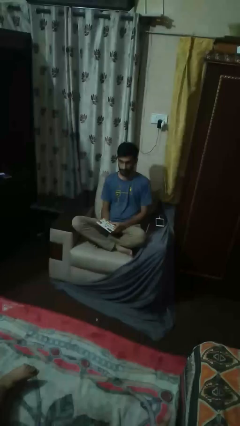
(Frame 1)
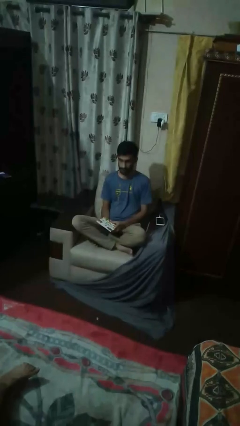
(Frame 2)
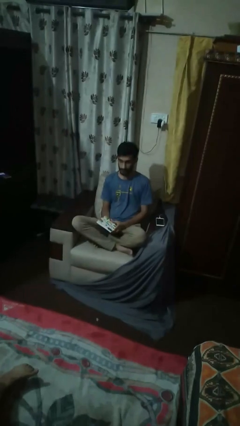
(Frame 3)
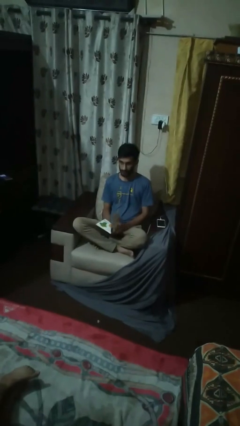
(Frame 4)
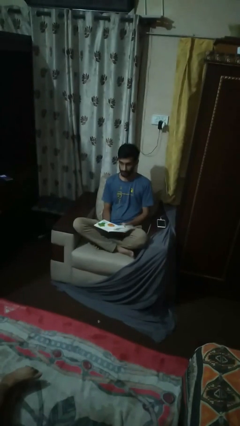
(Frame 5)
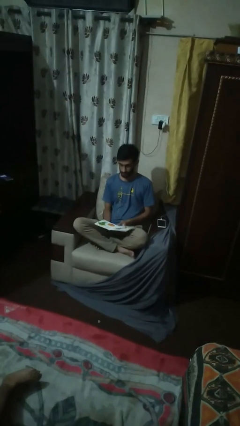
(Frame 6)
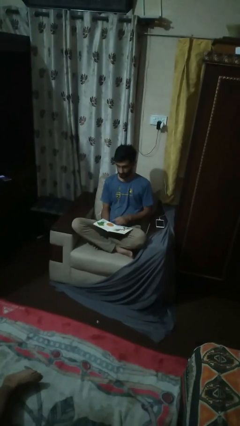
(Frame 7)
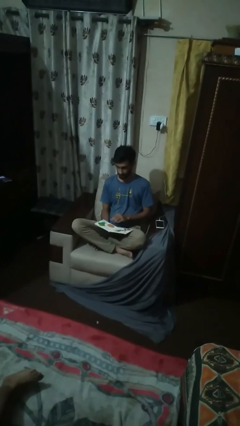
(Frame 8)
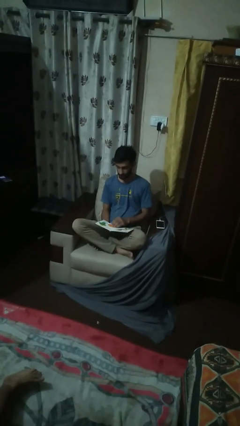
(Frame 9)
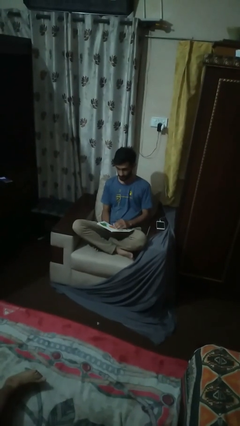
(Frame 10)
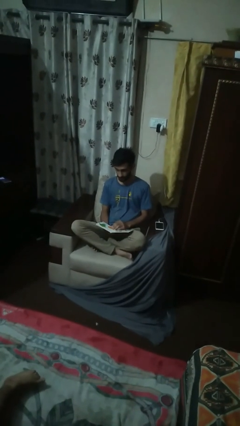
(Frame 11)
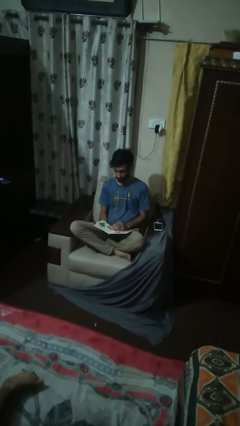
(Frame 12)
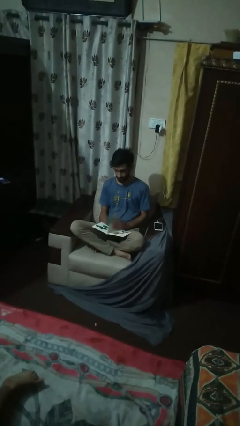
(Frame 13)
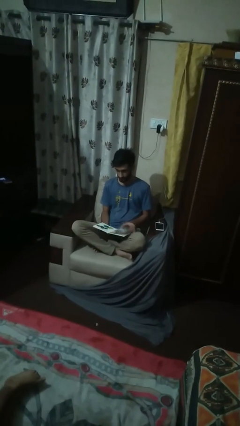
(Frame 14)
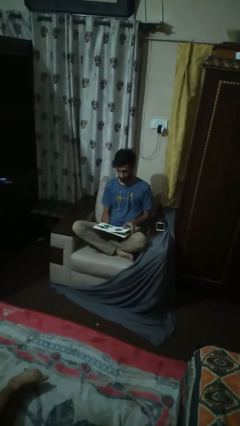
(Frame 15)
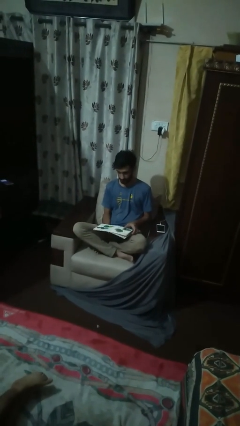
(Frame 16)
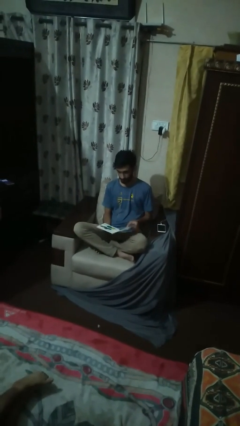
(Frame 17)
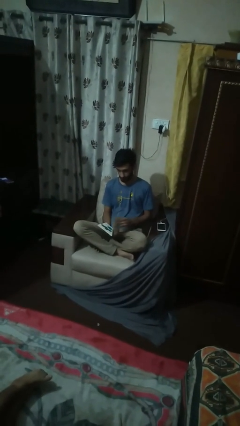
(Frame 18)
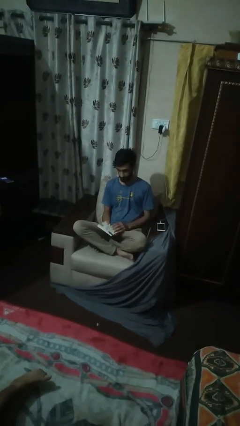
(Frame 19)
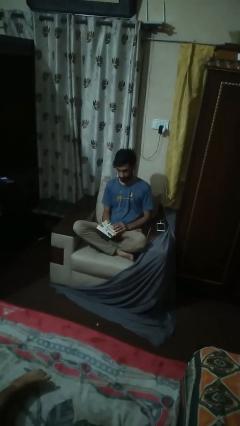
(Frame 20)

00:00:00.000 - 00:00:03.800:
person reads magazine

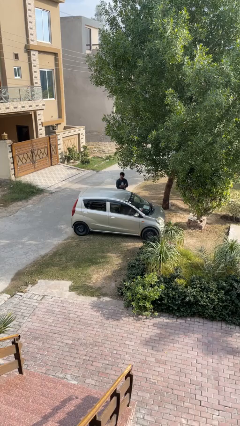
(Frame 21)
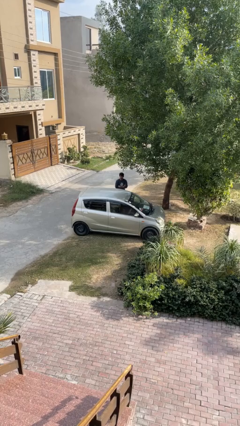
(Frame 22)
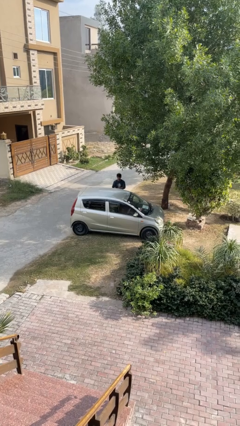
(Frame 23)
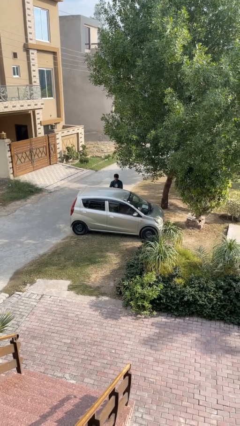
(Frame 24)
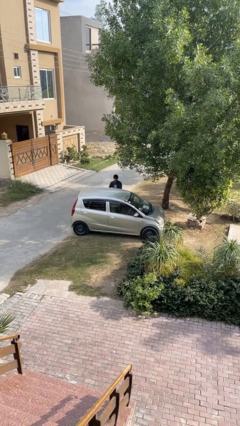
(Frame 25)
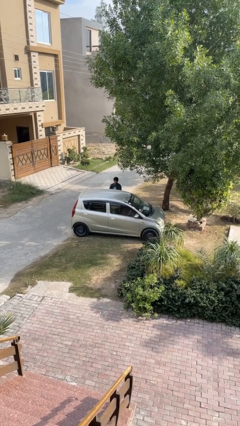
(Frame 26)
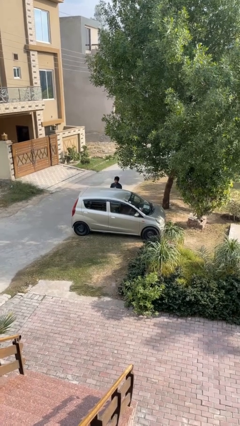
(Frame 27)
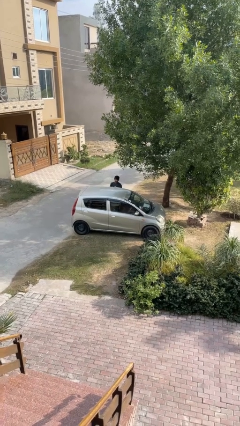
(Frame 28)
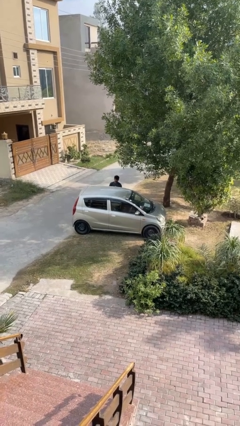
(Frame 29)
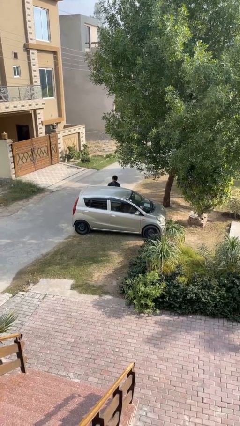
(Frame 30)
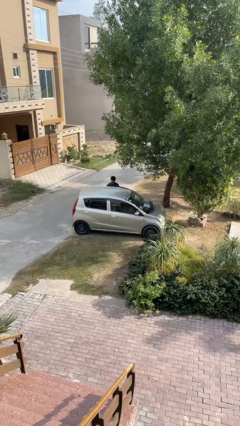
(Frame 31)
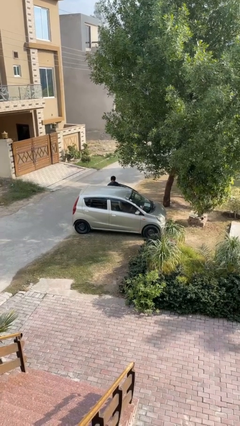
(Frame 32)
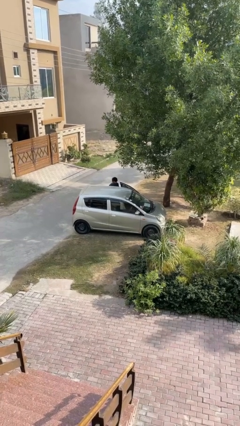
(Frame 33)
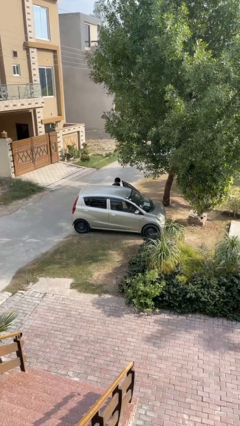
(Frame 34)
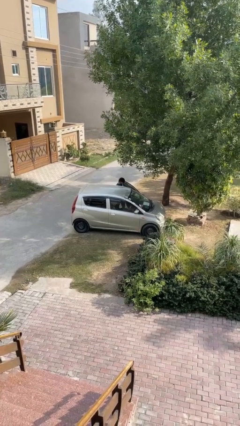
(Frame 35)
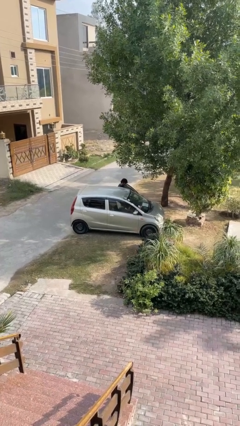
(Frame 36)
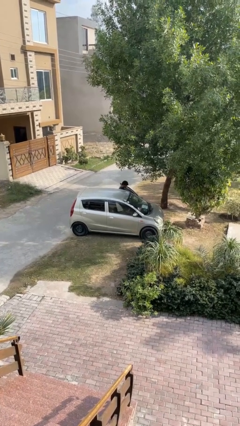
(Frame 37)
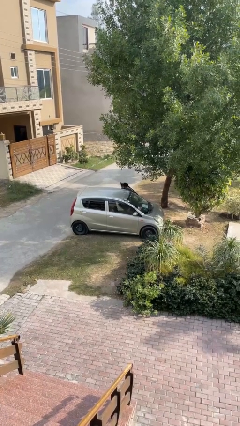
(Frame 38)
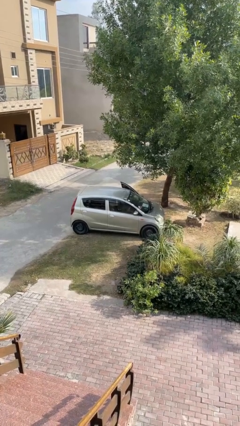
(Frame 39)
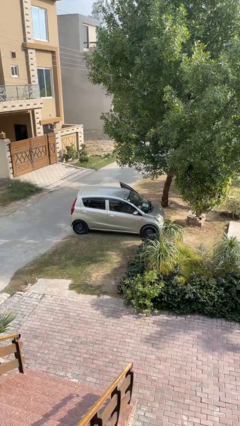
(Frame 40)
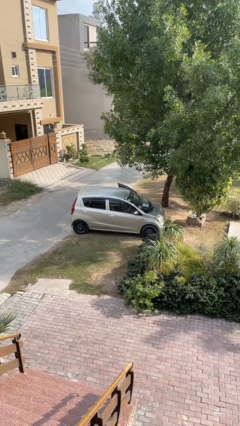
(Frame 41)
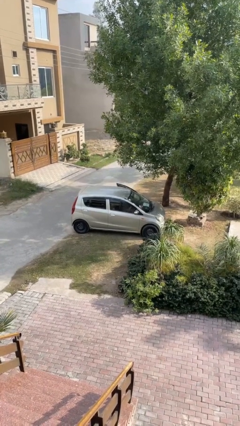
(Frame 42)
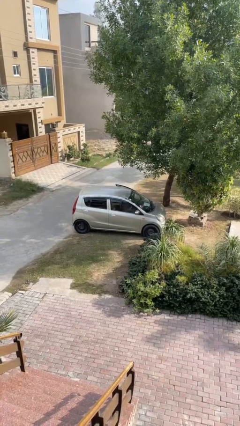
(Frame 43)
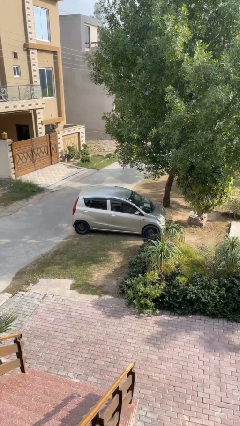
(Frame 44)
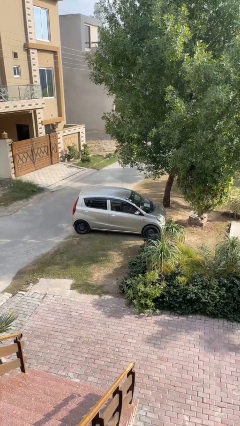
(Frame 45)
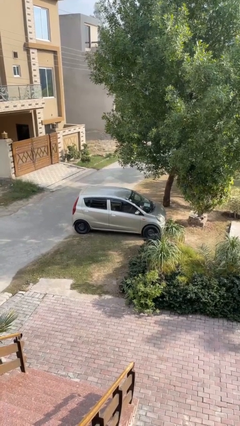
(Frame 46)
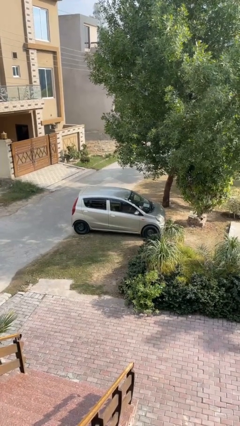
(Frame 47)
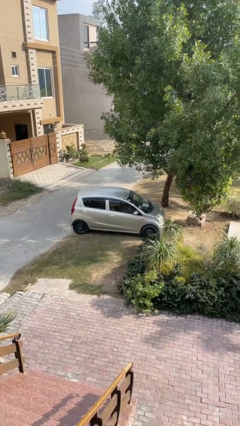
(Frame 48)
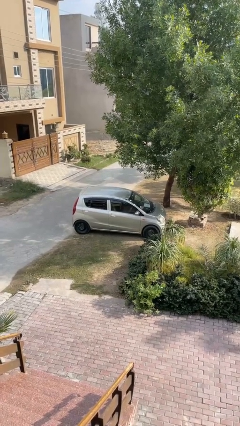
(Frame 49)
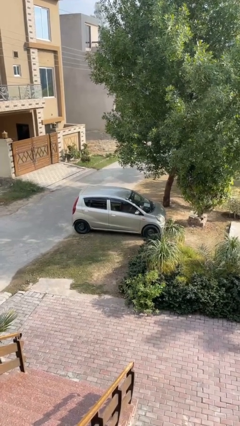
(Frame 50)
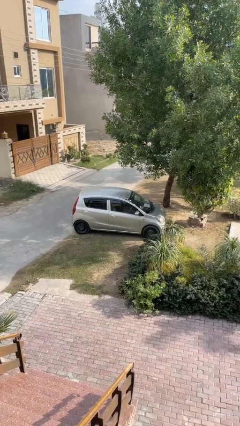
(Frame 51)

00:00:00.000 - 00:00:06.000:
car picks up person

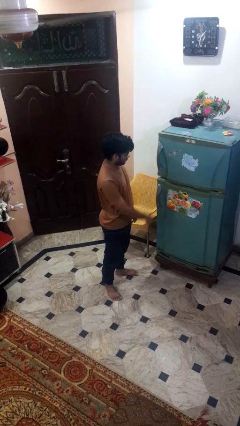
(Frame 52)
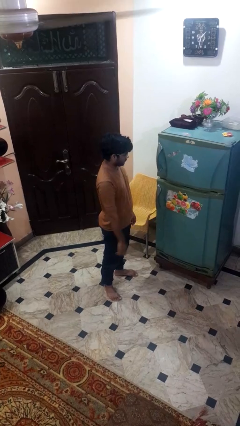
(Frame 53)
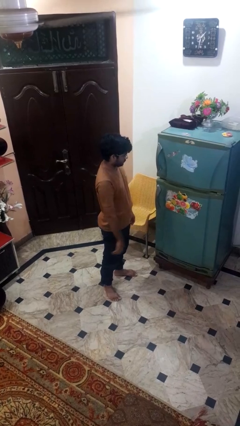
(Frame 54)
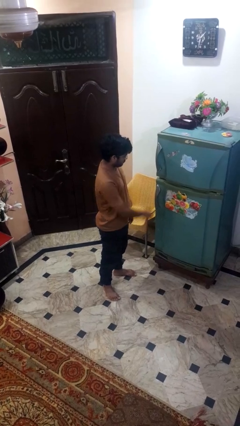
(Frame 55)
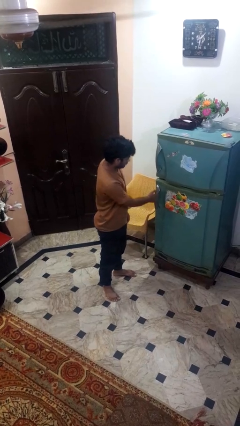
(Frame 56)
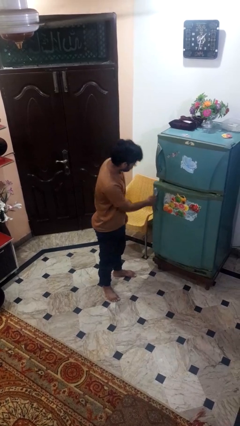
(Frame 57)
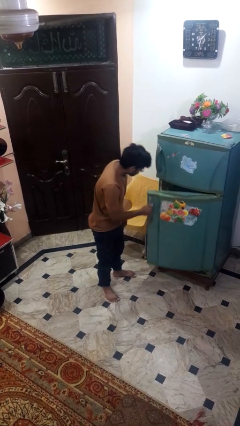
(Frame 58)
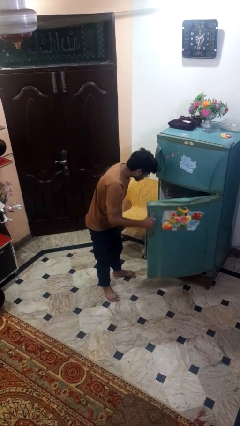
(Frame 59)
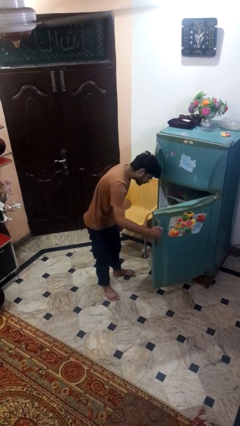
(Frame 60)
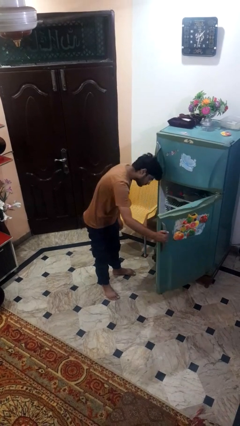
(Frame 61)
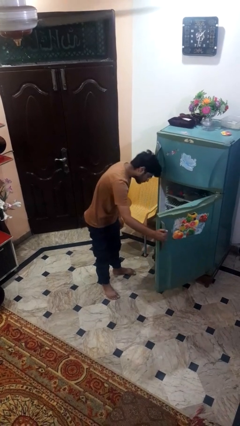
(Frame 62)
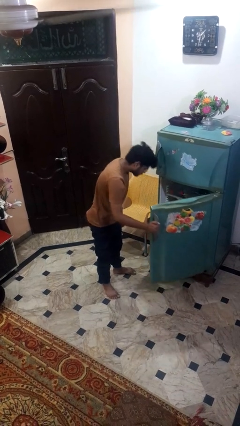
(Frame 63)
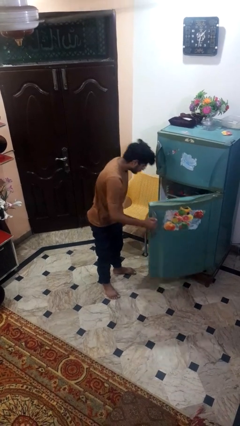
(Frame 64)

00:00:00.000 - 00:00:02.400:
person opens refrigerator

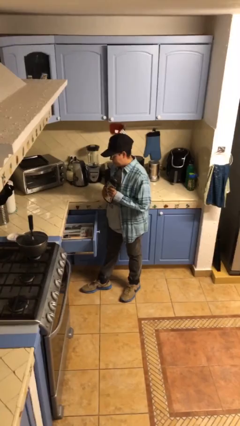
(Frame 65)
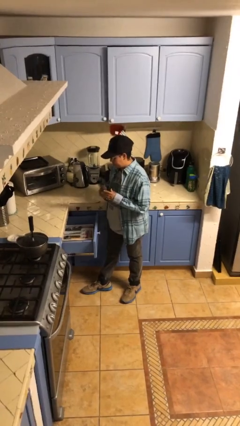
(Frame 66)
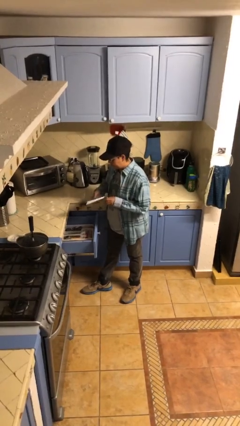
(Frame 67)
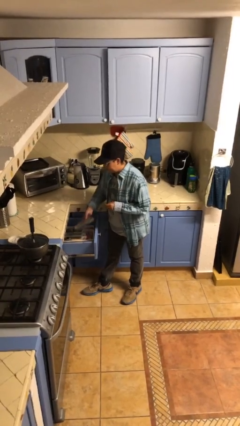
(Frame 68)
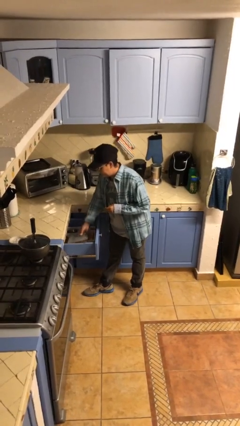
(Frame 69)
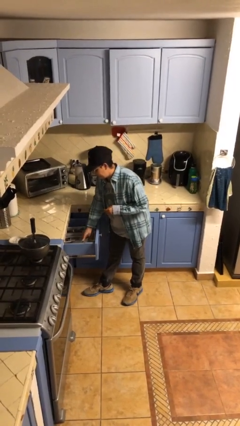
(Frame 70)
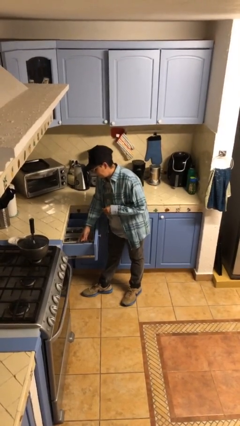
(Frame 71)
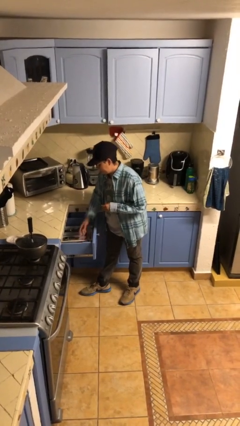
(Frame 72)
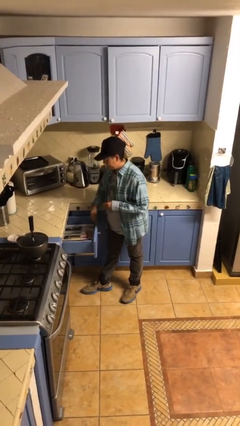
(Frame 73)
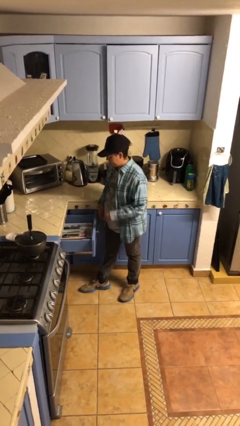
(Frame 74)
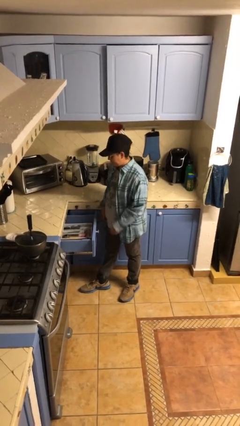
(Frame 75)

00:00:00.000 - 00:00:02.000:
person puts object into kitchen drawer

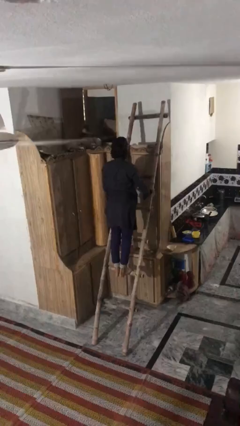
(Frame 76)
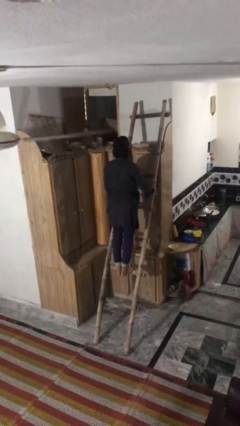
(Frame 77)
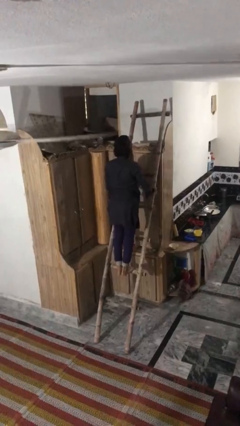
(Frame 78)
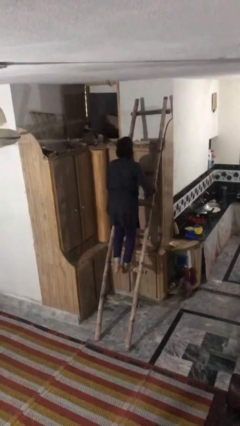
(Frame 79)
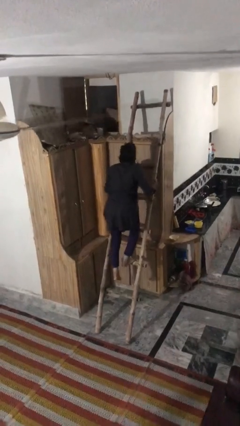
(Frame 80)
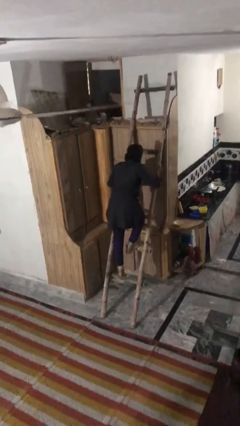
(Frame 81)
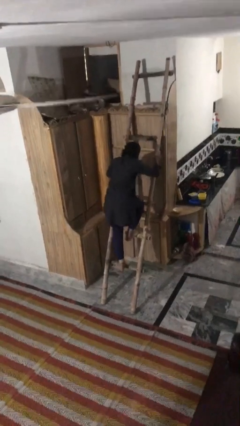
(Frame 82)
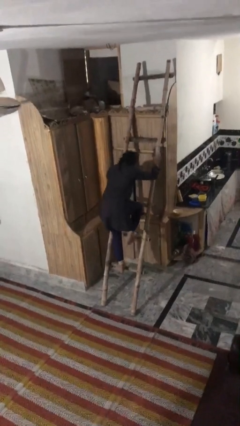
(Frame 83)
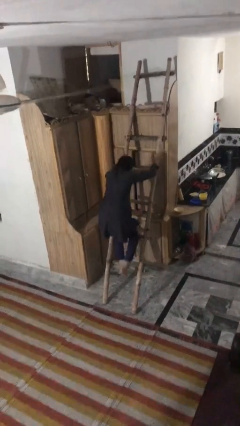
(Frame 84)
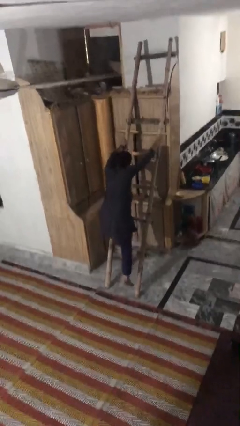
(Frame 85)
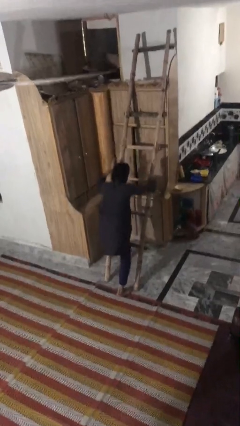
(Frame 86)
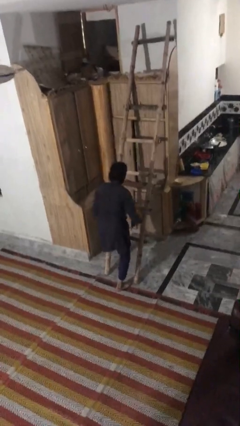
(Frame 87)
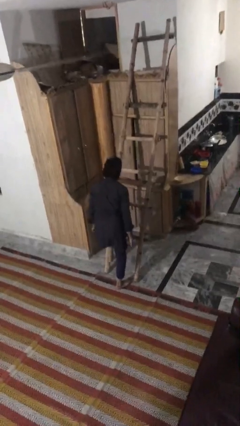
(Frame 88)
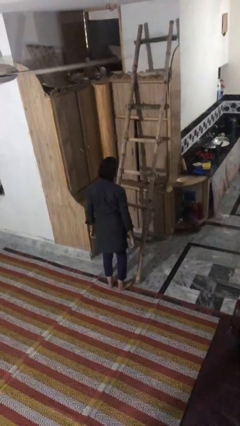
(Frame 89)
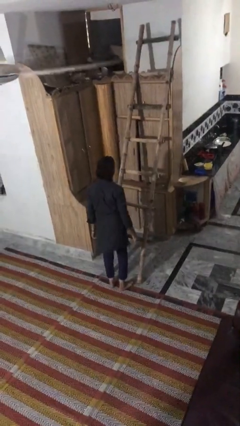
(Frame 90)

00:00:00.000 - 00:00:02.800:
person climbs down ladder

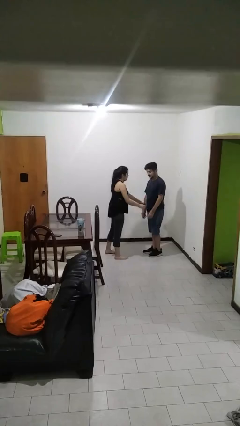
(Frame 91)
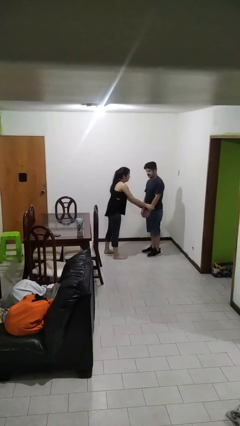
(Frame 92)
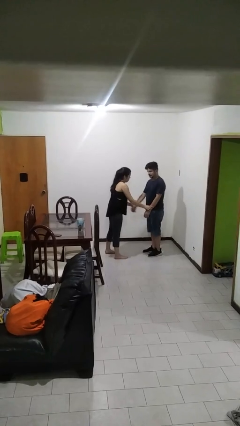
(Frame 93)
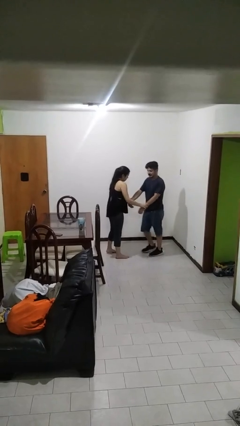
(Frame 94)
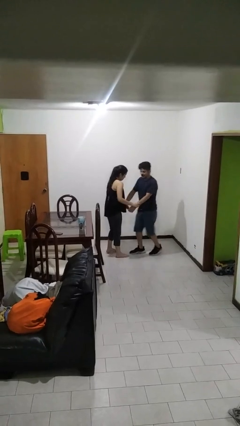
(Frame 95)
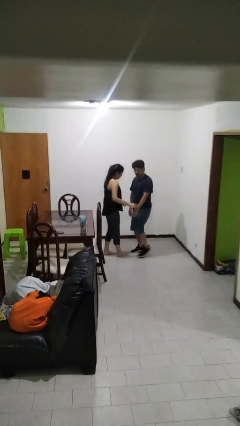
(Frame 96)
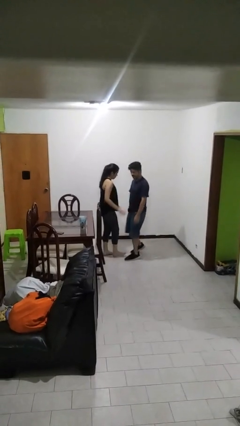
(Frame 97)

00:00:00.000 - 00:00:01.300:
person grabs person by forearm
